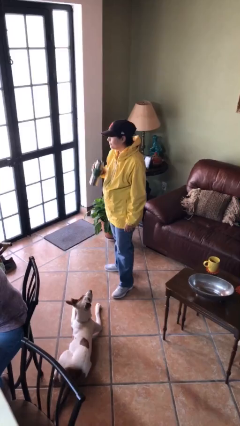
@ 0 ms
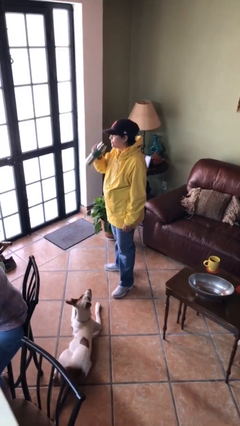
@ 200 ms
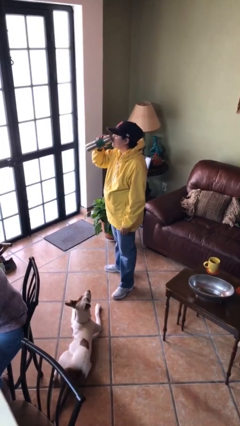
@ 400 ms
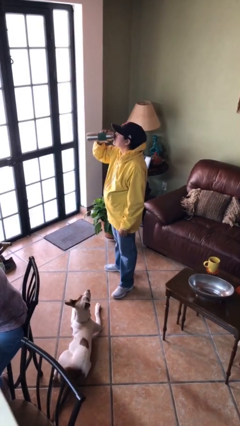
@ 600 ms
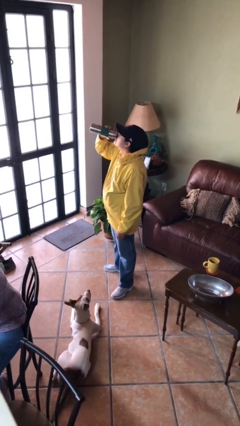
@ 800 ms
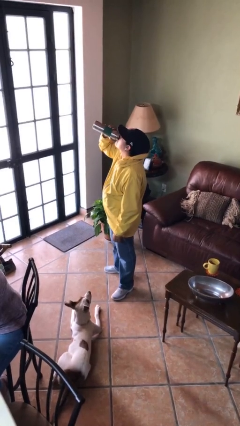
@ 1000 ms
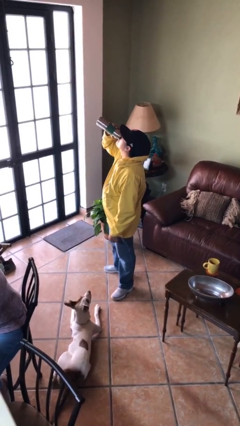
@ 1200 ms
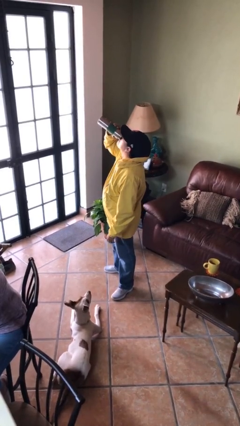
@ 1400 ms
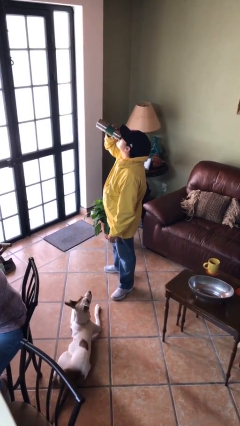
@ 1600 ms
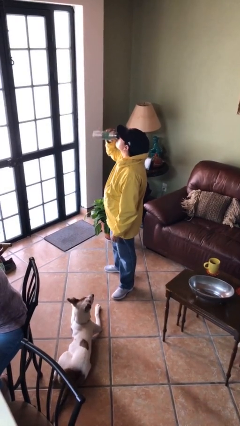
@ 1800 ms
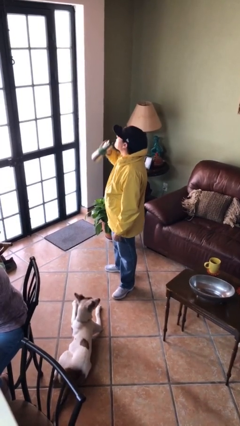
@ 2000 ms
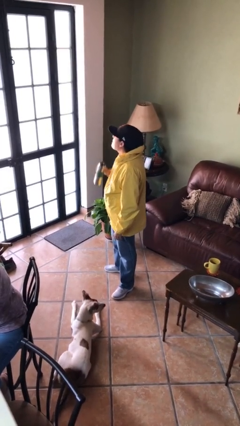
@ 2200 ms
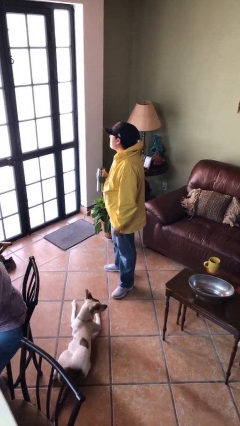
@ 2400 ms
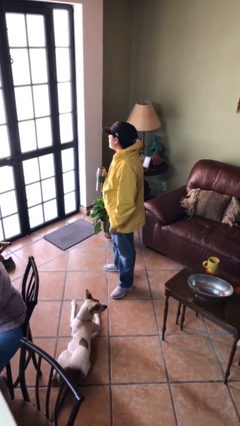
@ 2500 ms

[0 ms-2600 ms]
person drinks from bottle

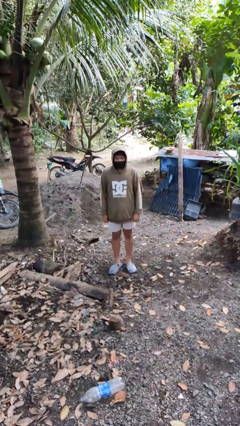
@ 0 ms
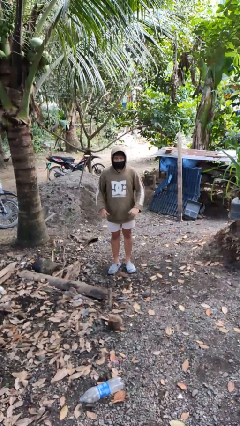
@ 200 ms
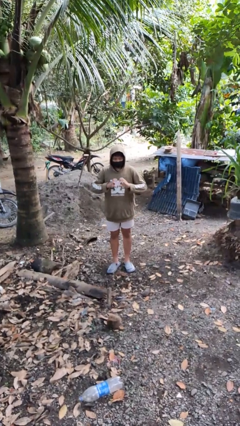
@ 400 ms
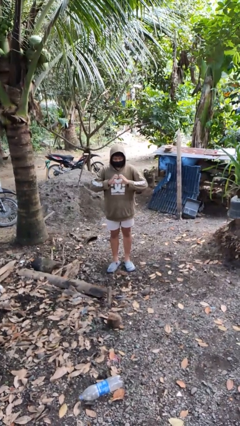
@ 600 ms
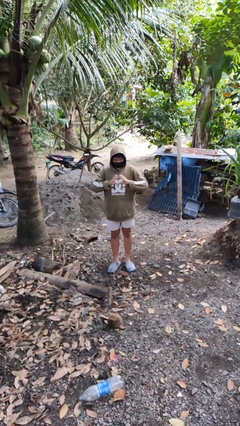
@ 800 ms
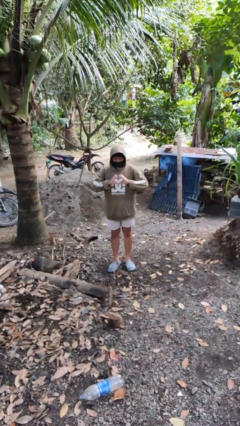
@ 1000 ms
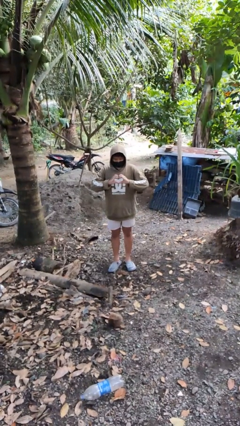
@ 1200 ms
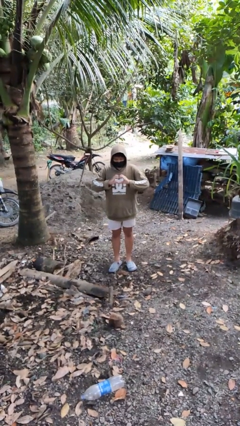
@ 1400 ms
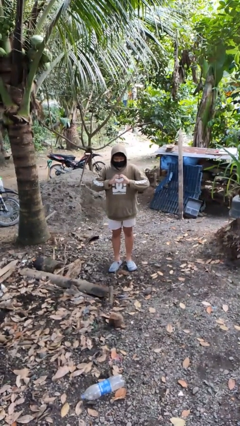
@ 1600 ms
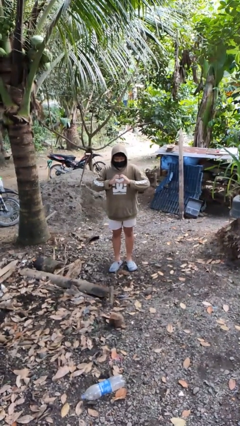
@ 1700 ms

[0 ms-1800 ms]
person gestures heart

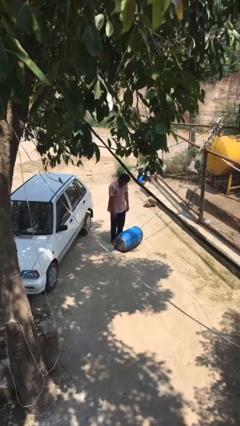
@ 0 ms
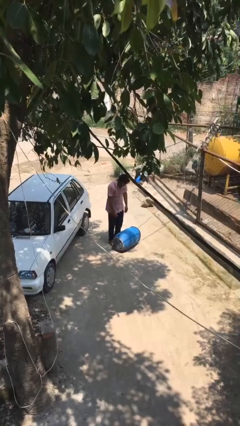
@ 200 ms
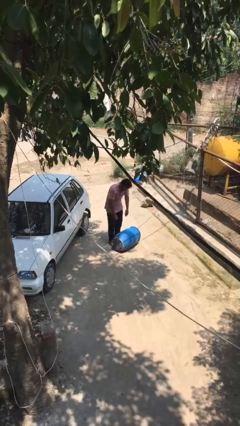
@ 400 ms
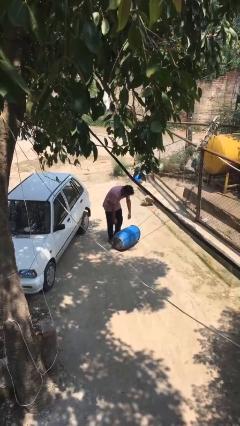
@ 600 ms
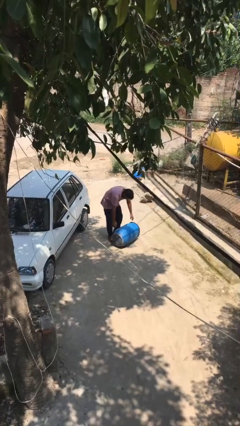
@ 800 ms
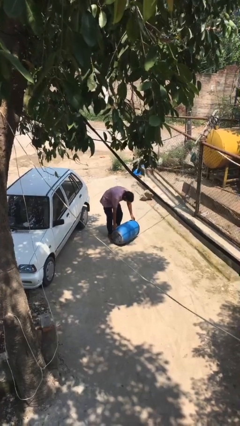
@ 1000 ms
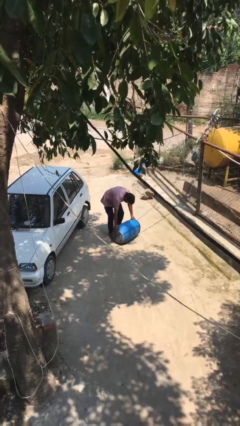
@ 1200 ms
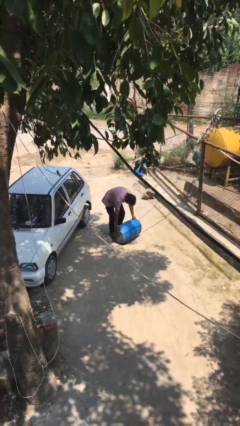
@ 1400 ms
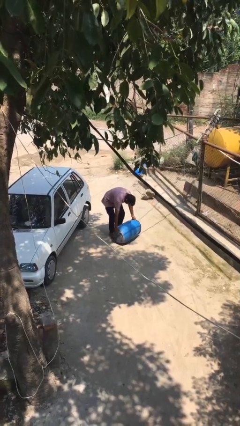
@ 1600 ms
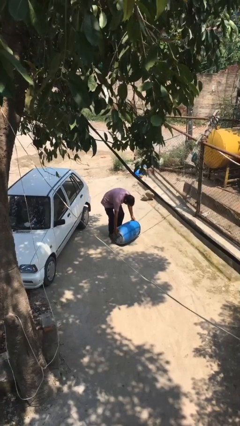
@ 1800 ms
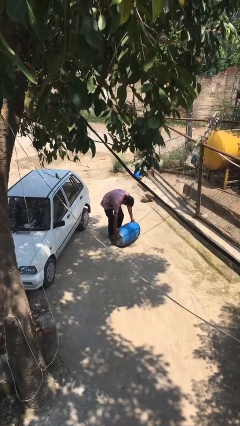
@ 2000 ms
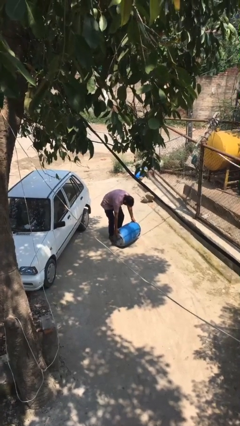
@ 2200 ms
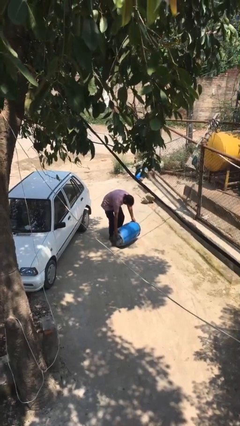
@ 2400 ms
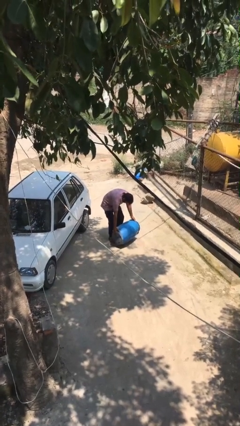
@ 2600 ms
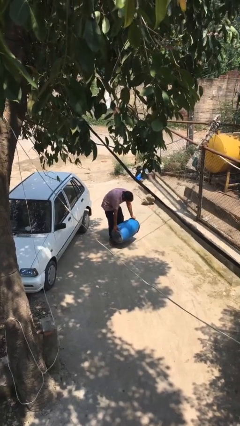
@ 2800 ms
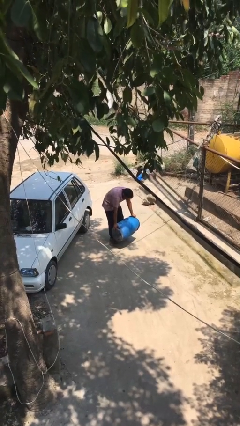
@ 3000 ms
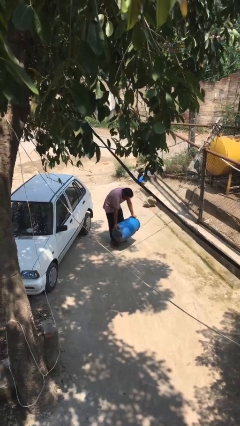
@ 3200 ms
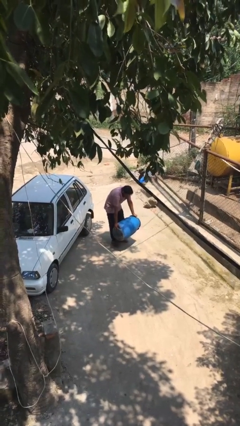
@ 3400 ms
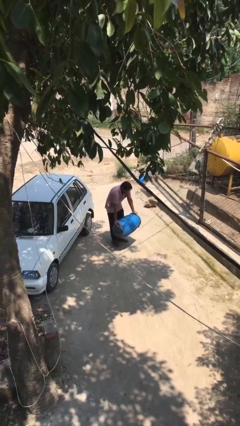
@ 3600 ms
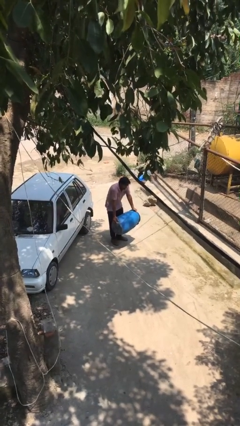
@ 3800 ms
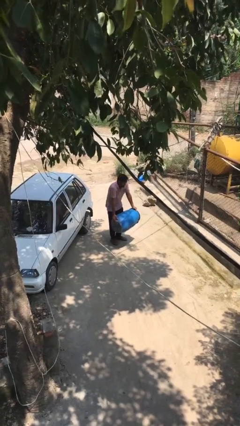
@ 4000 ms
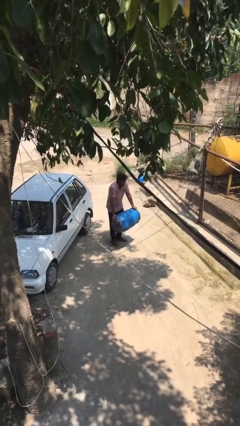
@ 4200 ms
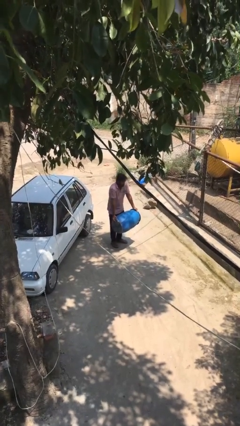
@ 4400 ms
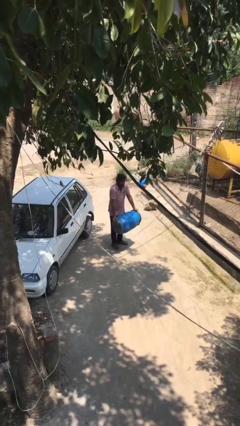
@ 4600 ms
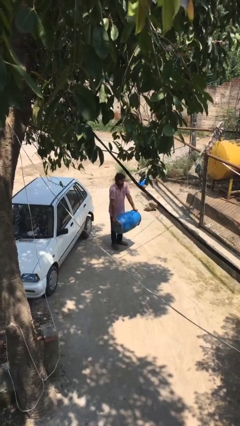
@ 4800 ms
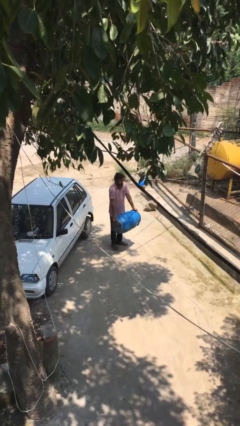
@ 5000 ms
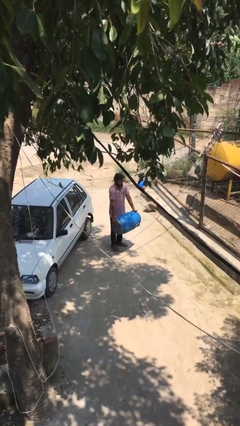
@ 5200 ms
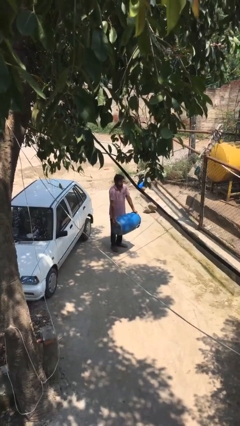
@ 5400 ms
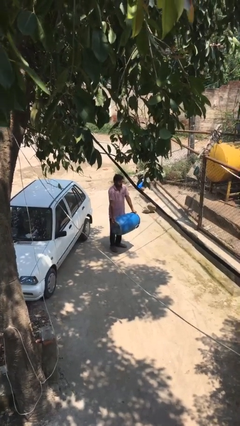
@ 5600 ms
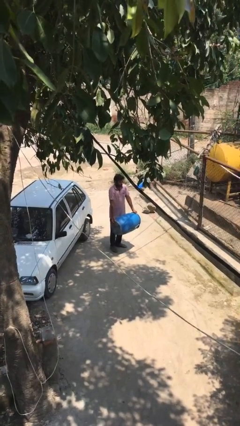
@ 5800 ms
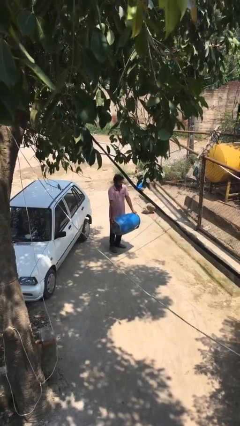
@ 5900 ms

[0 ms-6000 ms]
person picks up object from floor

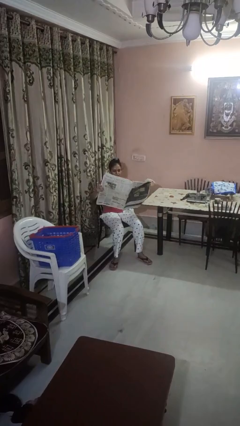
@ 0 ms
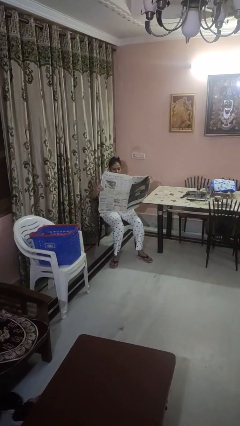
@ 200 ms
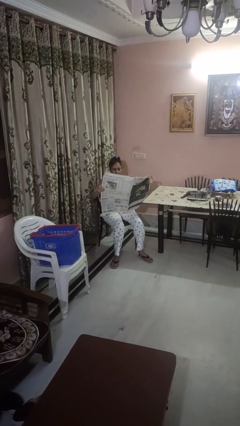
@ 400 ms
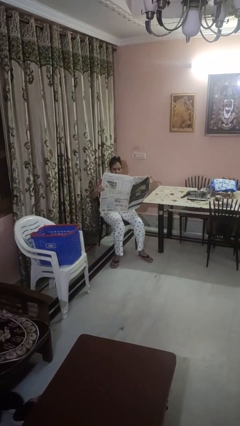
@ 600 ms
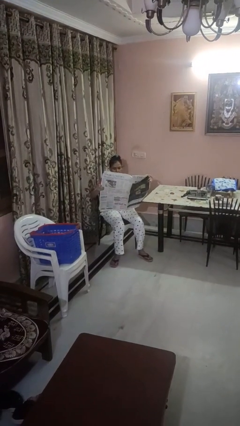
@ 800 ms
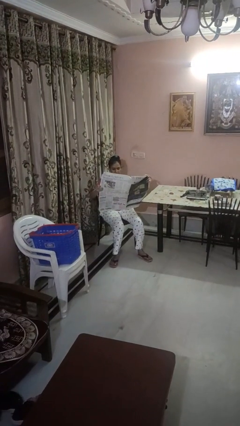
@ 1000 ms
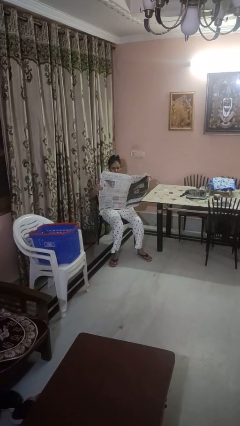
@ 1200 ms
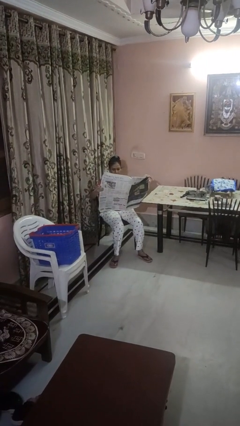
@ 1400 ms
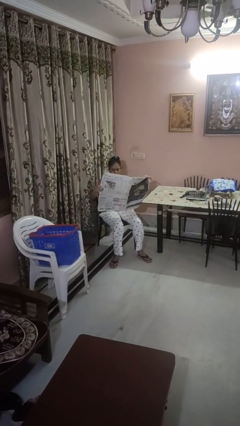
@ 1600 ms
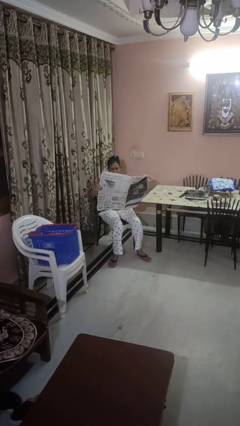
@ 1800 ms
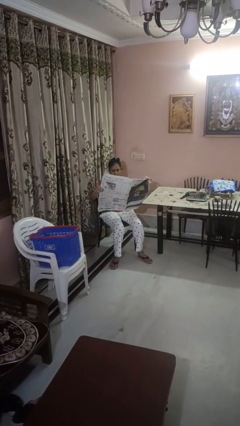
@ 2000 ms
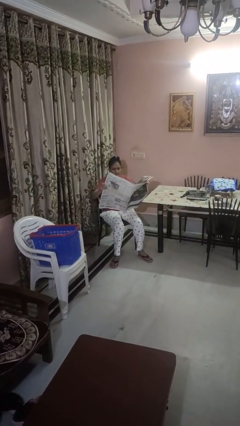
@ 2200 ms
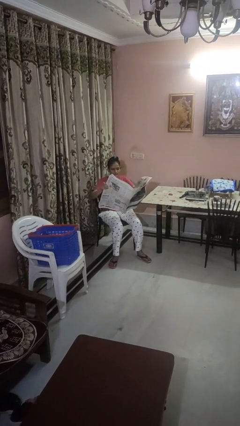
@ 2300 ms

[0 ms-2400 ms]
person reads newspaper

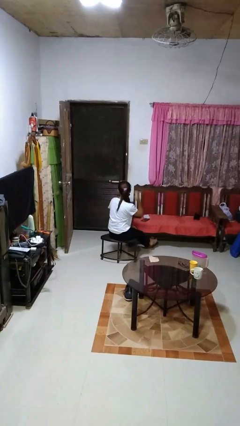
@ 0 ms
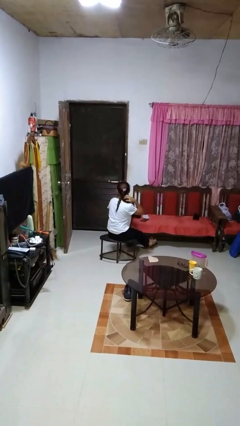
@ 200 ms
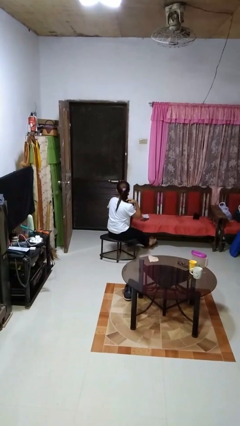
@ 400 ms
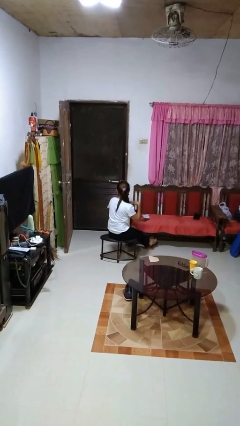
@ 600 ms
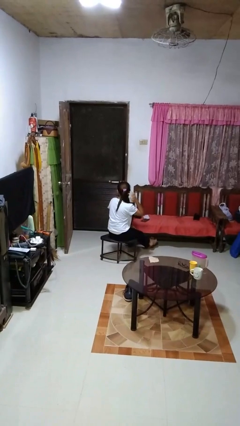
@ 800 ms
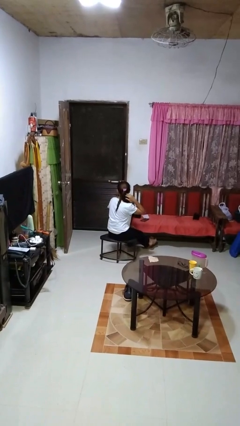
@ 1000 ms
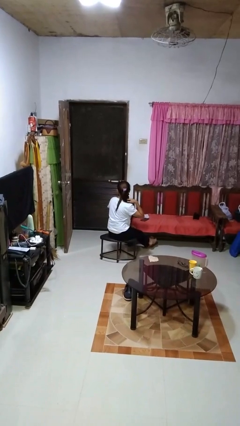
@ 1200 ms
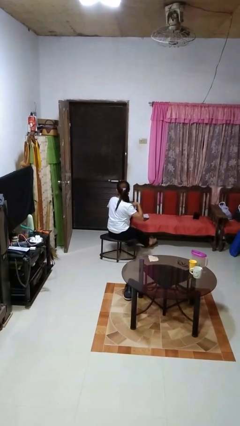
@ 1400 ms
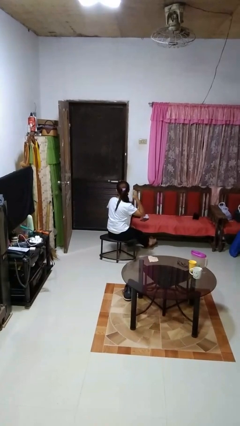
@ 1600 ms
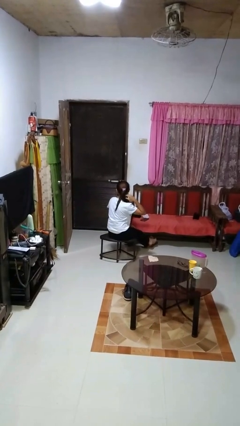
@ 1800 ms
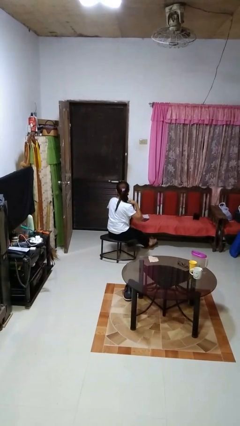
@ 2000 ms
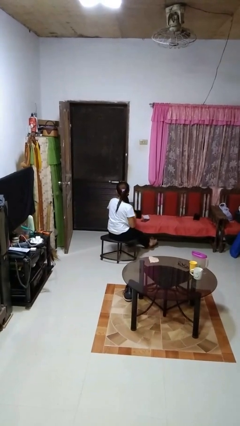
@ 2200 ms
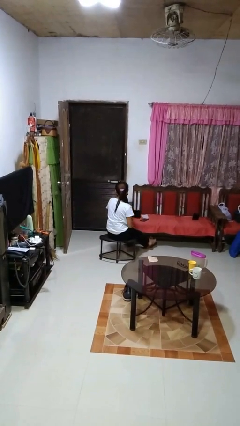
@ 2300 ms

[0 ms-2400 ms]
person strokes hair

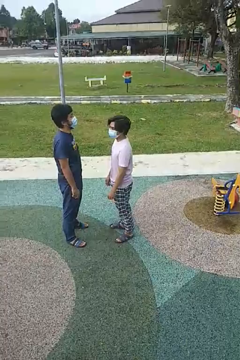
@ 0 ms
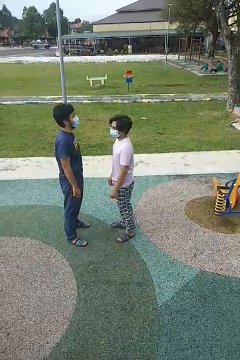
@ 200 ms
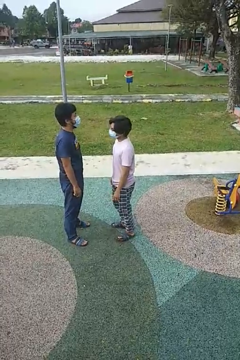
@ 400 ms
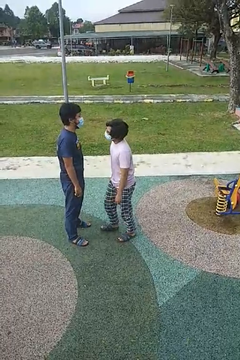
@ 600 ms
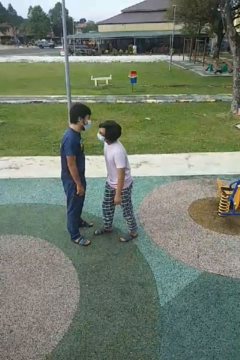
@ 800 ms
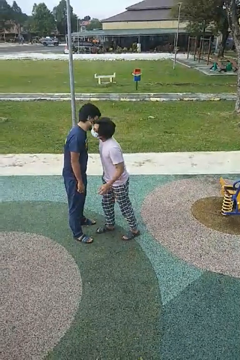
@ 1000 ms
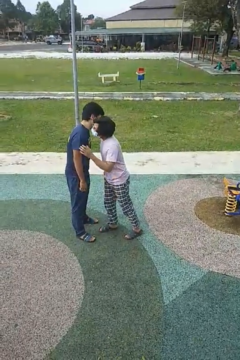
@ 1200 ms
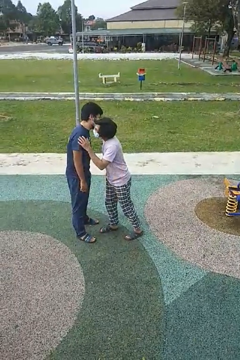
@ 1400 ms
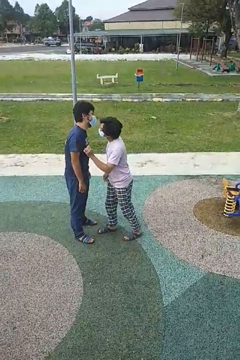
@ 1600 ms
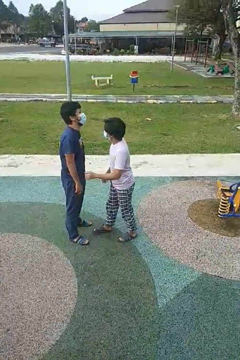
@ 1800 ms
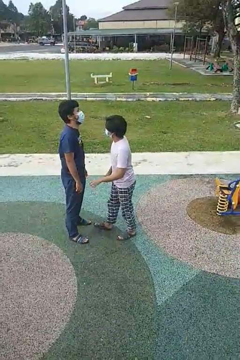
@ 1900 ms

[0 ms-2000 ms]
person kisses cheek of person

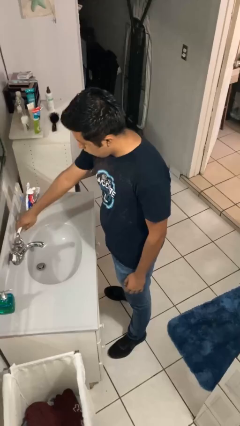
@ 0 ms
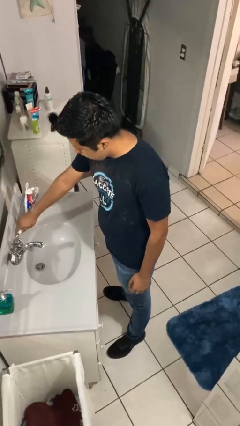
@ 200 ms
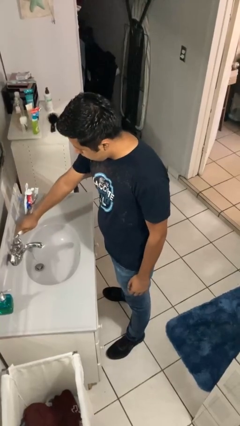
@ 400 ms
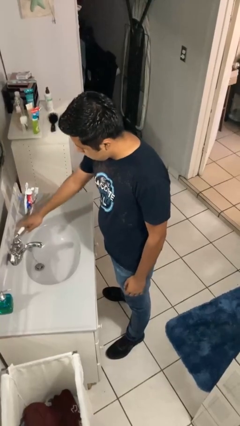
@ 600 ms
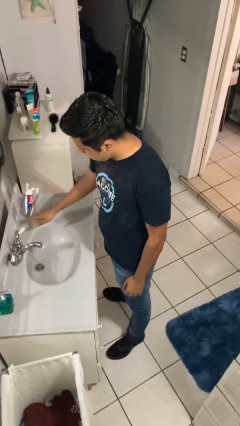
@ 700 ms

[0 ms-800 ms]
person turns on faucet
